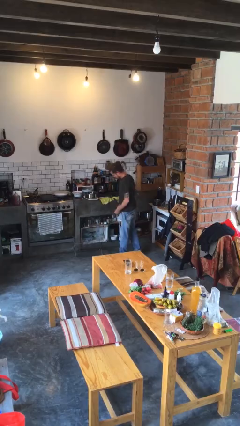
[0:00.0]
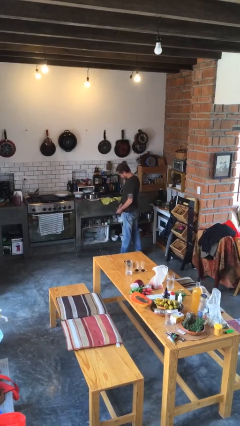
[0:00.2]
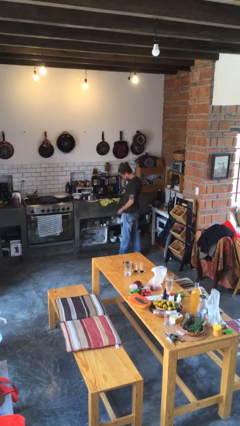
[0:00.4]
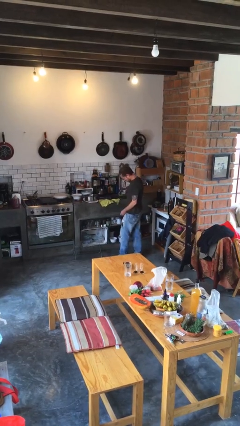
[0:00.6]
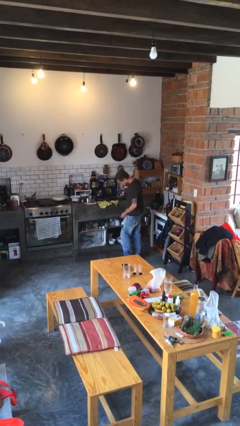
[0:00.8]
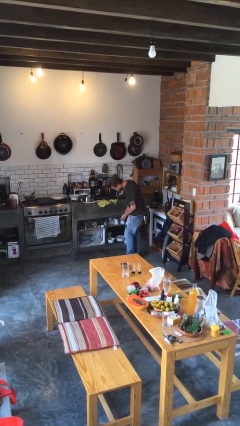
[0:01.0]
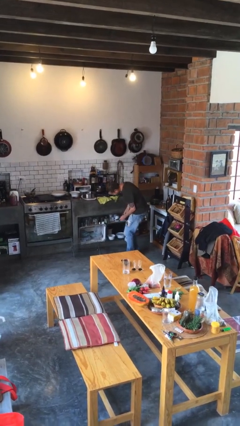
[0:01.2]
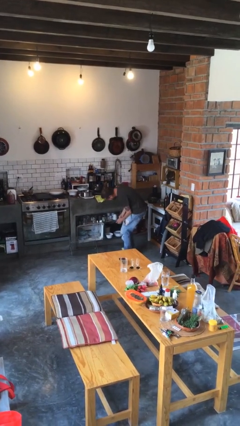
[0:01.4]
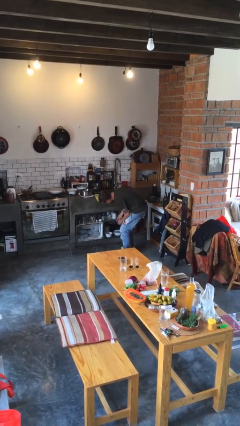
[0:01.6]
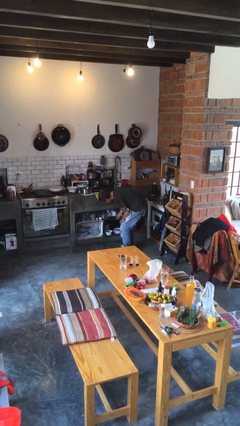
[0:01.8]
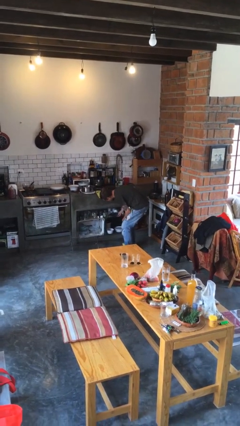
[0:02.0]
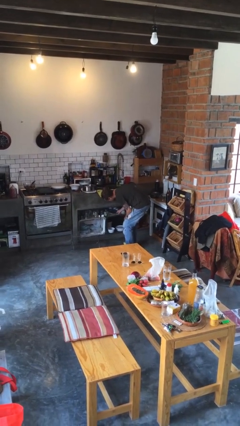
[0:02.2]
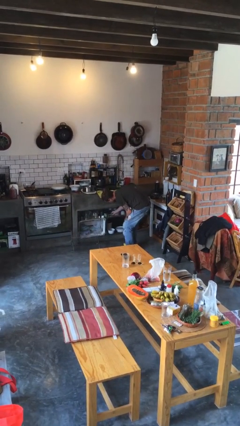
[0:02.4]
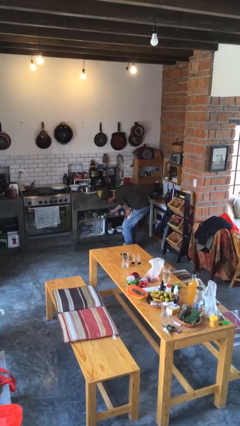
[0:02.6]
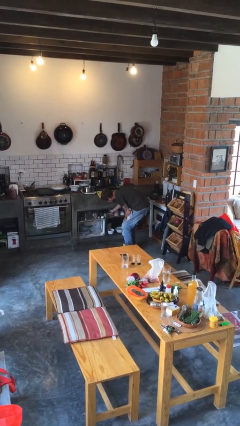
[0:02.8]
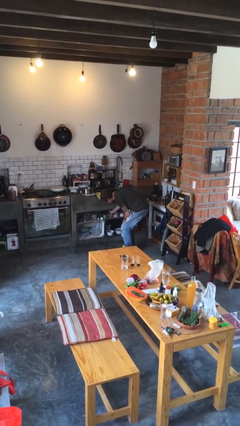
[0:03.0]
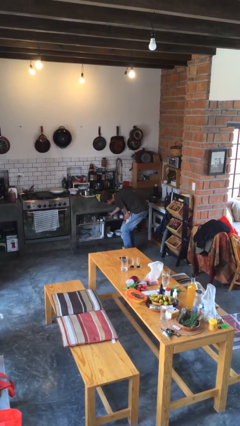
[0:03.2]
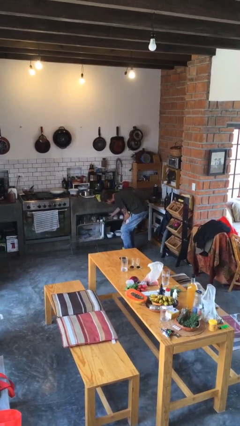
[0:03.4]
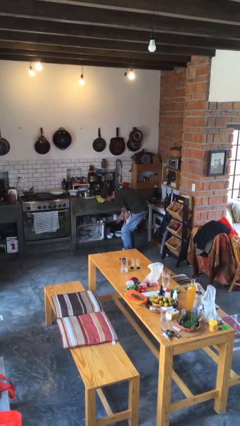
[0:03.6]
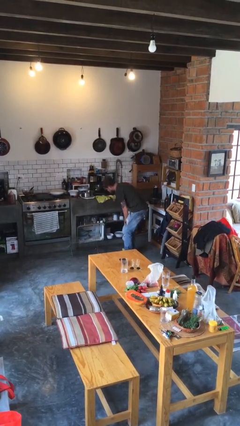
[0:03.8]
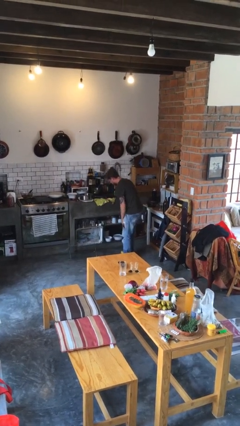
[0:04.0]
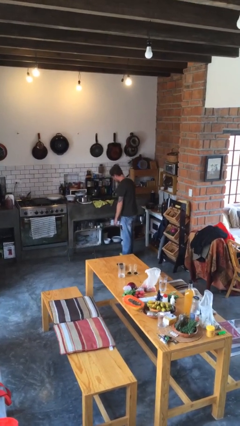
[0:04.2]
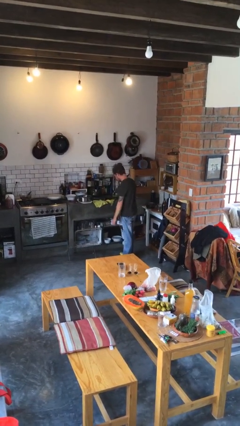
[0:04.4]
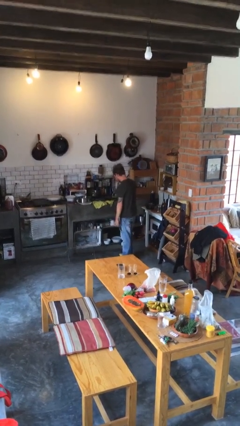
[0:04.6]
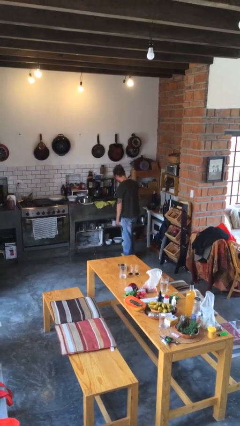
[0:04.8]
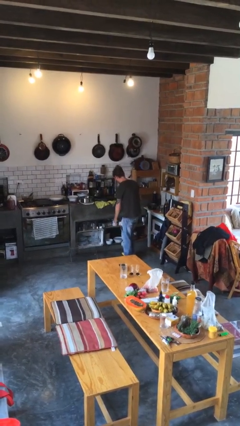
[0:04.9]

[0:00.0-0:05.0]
person puts down object into cabinet

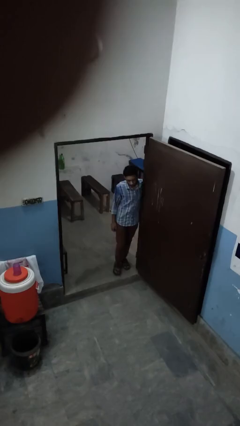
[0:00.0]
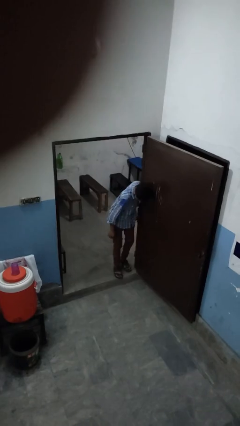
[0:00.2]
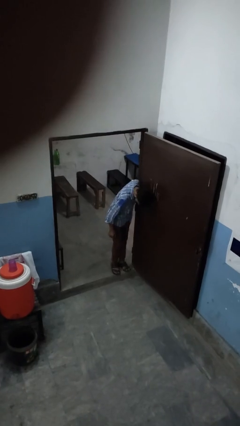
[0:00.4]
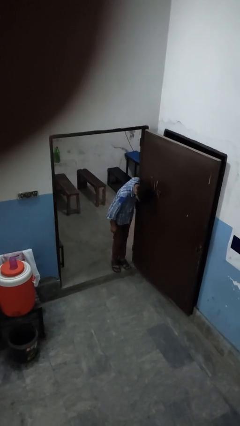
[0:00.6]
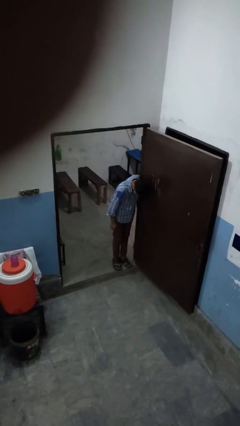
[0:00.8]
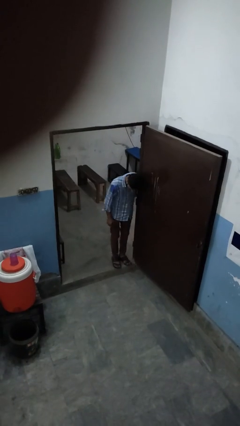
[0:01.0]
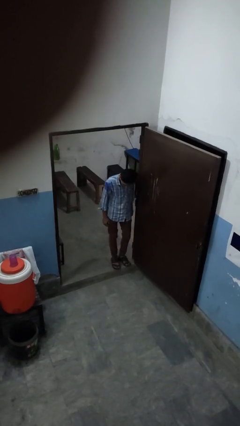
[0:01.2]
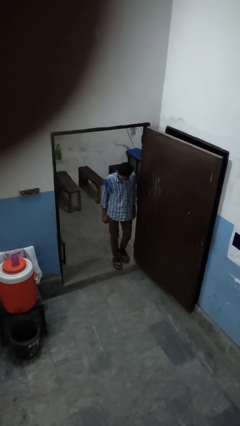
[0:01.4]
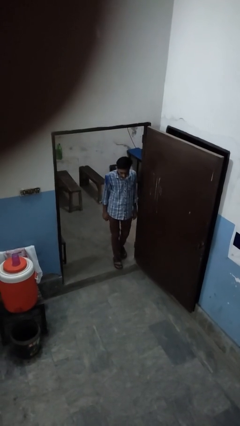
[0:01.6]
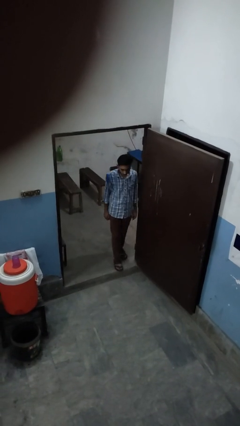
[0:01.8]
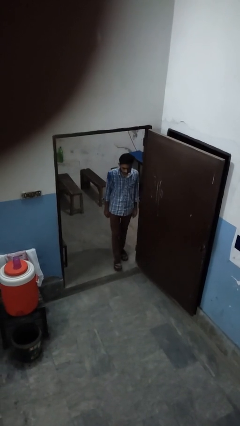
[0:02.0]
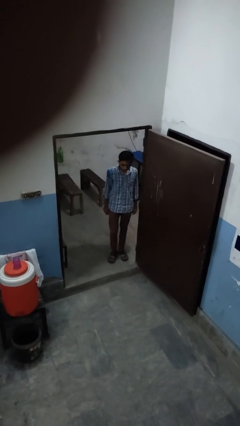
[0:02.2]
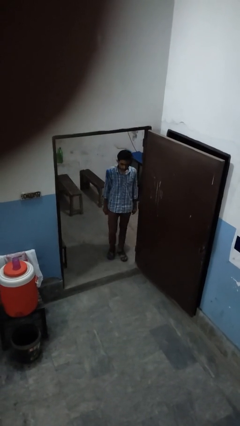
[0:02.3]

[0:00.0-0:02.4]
person bumps into wall

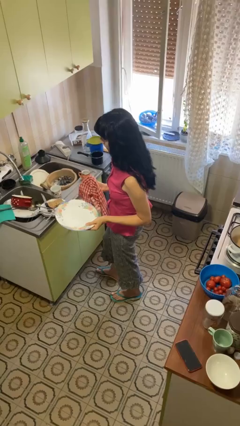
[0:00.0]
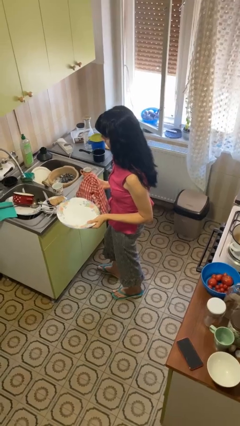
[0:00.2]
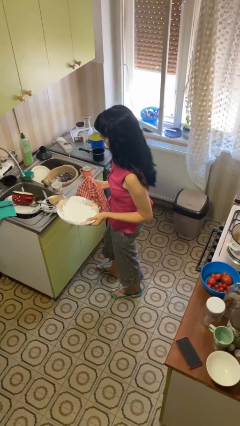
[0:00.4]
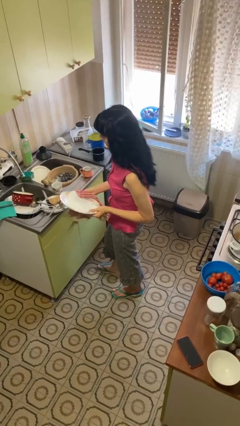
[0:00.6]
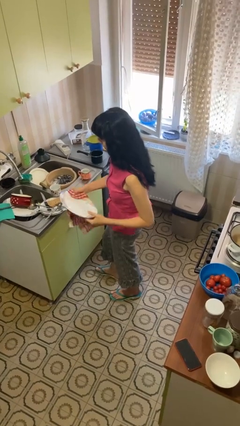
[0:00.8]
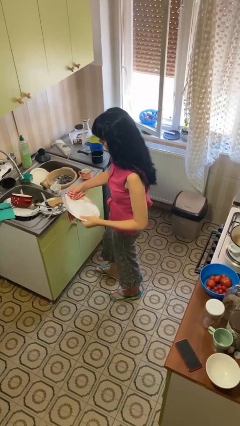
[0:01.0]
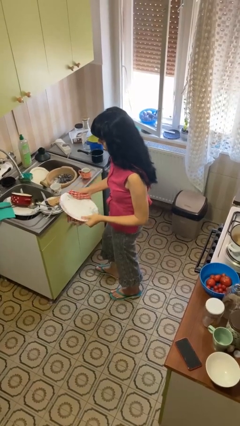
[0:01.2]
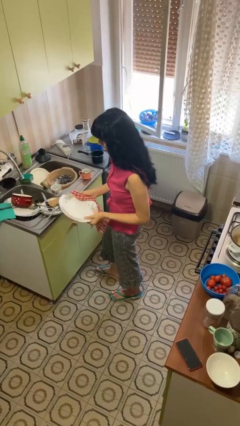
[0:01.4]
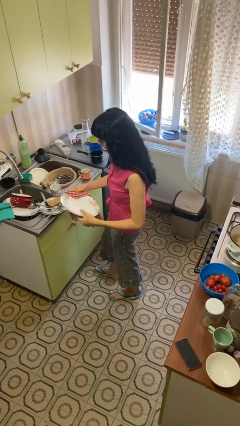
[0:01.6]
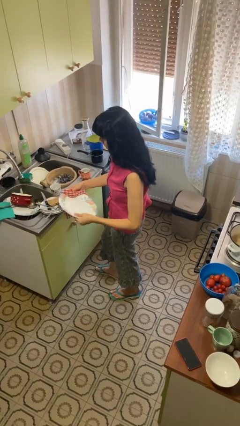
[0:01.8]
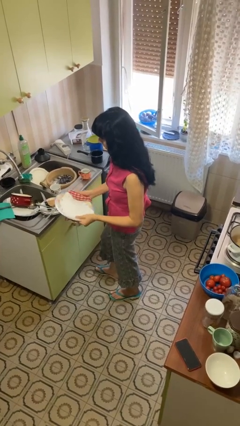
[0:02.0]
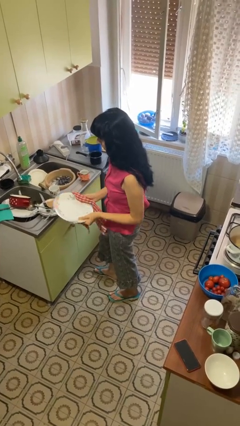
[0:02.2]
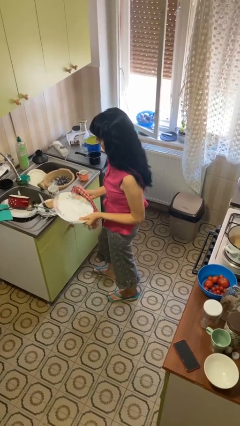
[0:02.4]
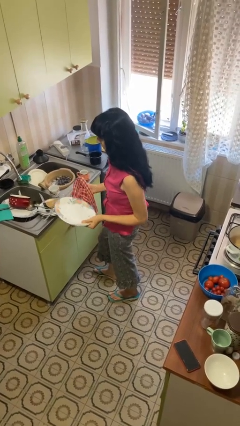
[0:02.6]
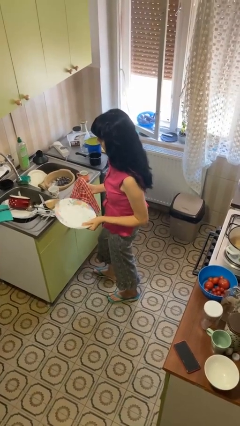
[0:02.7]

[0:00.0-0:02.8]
person dries dish

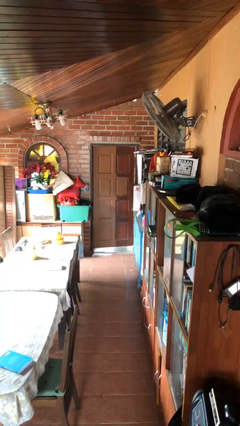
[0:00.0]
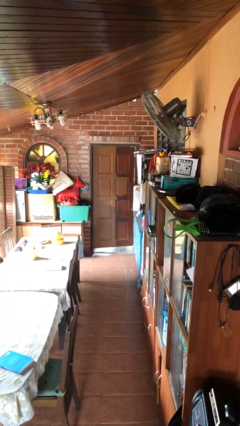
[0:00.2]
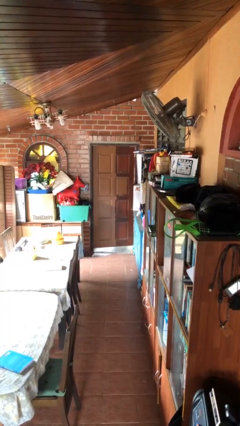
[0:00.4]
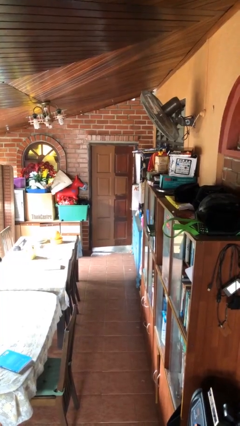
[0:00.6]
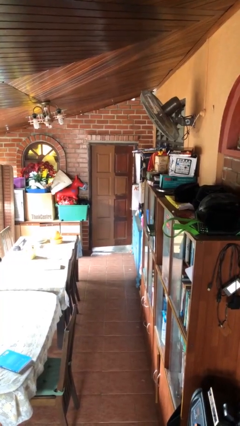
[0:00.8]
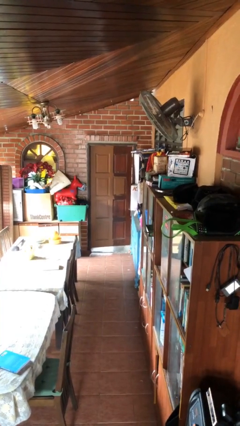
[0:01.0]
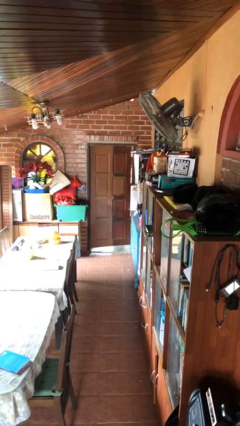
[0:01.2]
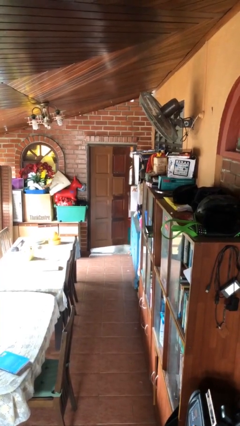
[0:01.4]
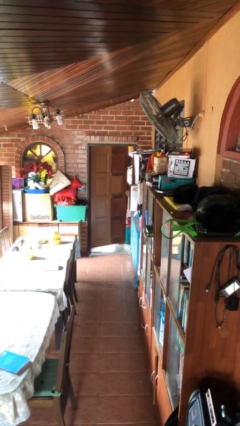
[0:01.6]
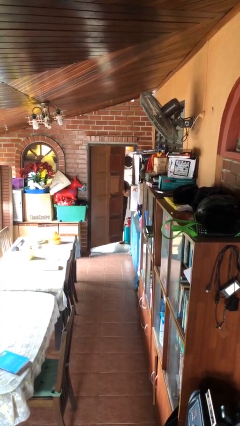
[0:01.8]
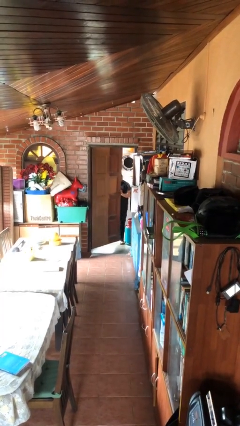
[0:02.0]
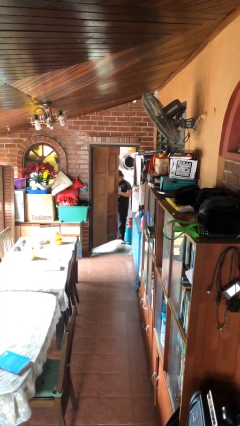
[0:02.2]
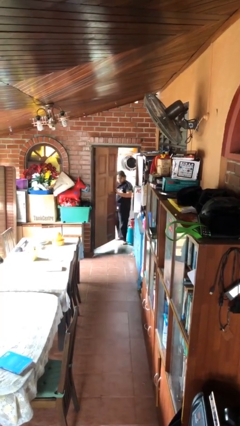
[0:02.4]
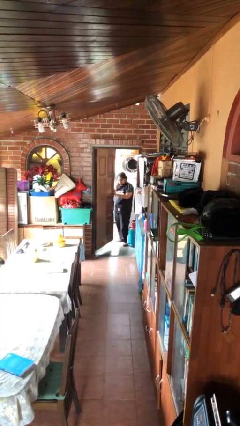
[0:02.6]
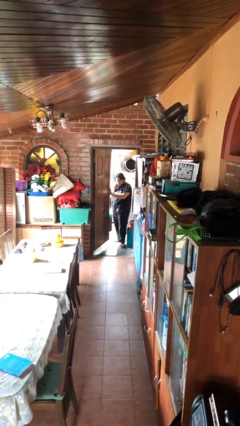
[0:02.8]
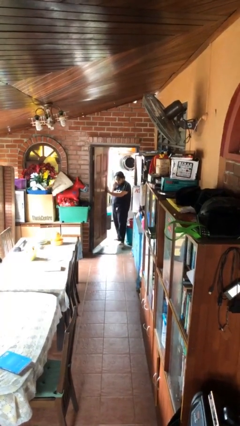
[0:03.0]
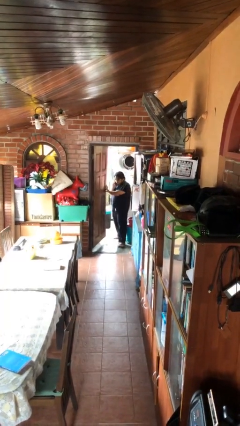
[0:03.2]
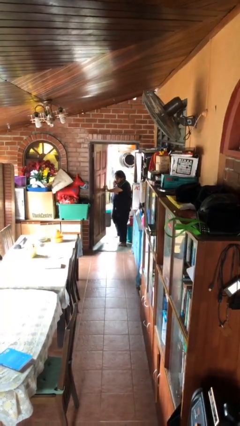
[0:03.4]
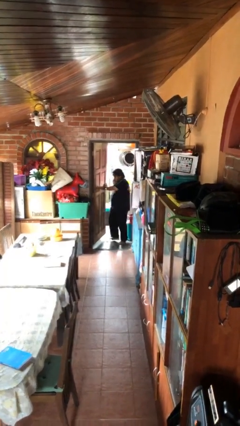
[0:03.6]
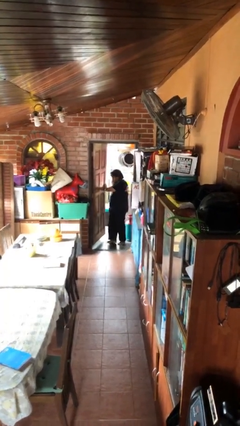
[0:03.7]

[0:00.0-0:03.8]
person opens facility door

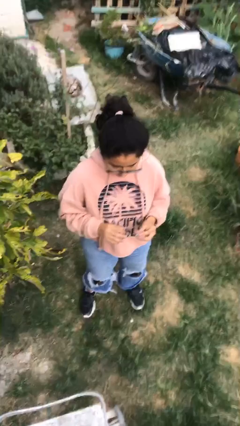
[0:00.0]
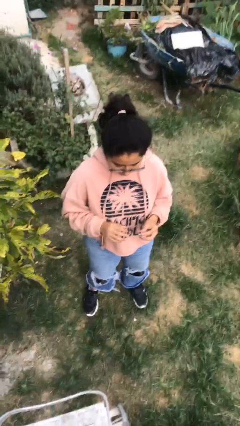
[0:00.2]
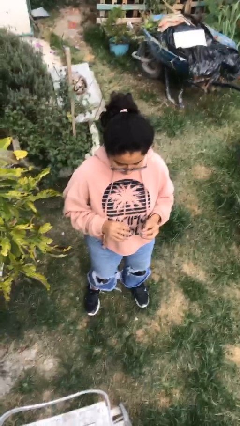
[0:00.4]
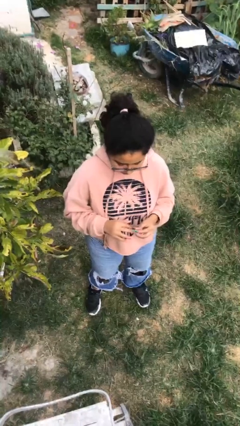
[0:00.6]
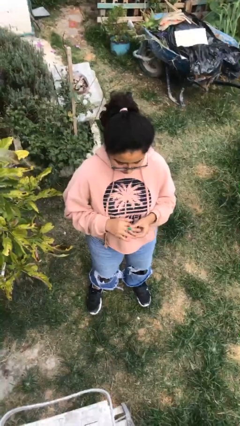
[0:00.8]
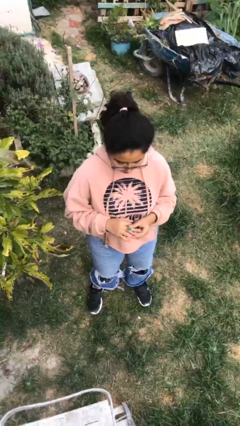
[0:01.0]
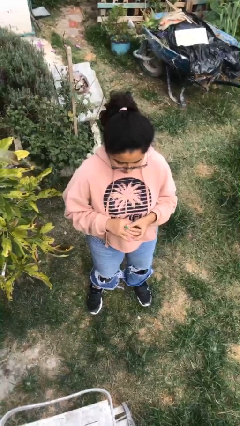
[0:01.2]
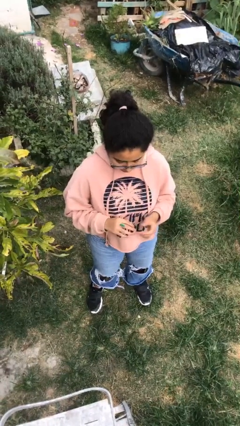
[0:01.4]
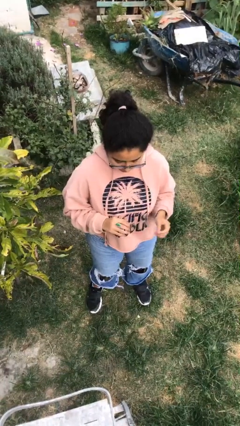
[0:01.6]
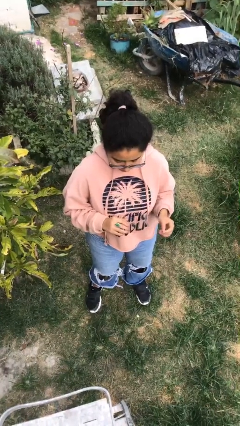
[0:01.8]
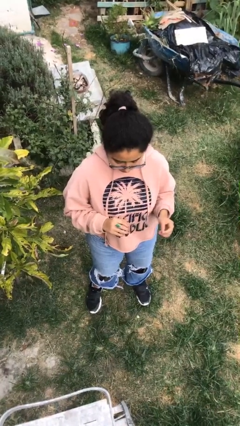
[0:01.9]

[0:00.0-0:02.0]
person puts on ring

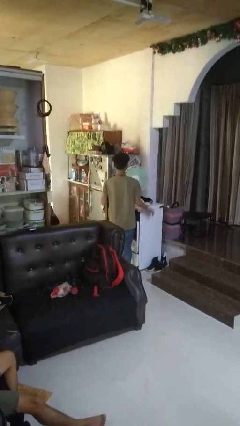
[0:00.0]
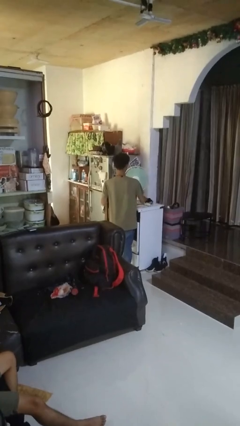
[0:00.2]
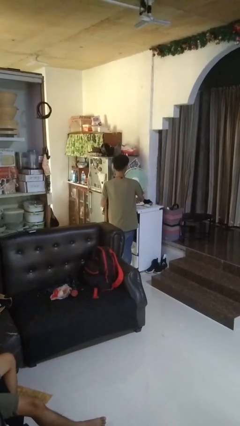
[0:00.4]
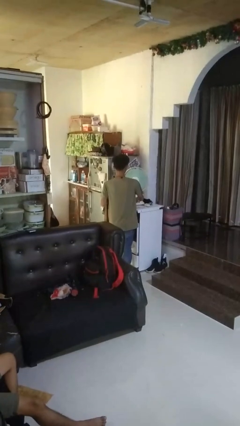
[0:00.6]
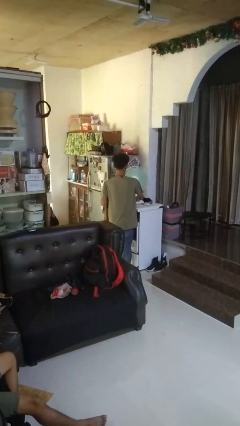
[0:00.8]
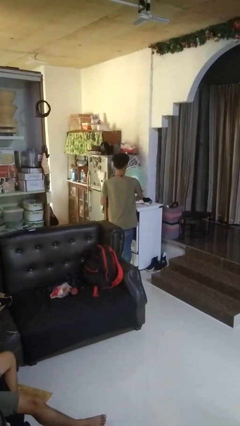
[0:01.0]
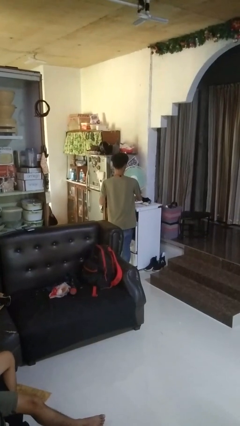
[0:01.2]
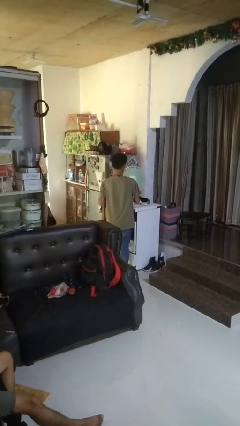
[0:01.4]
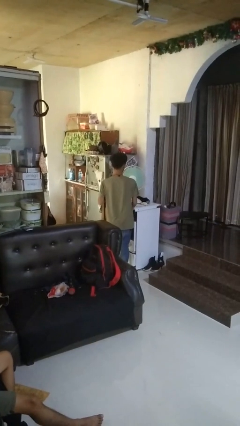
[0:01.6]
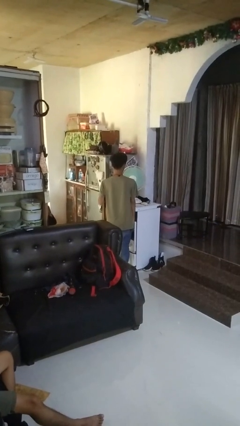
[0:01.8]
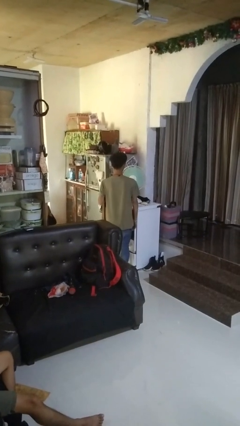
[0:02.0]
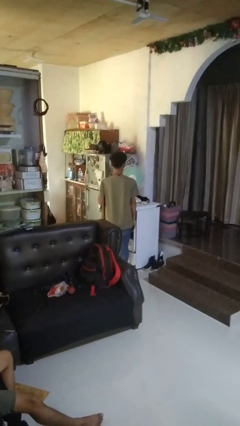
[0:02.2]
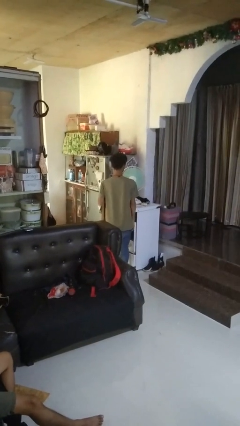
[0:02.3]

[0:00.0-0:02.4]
person turns off fan
